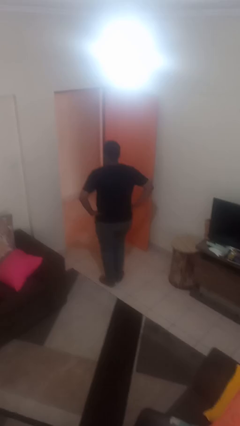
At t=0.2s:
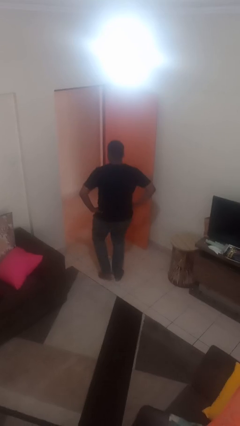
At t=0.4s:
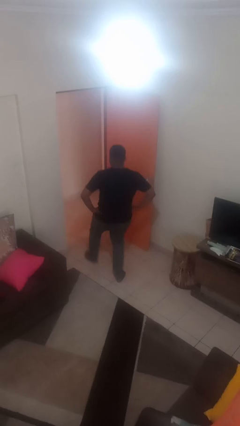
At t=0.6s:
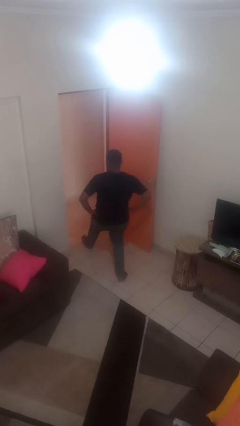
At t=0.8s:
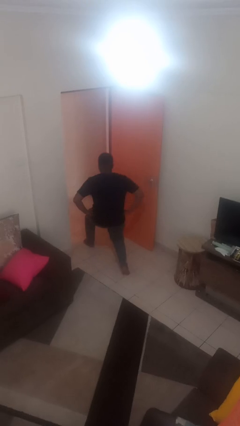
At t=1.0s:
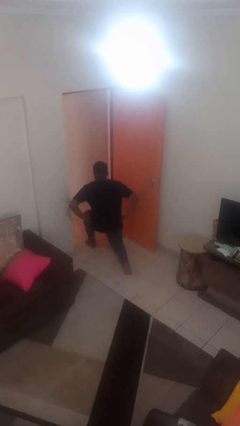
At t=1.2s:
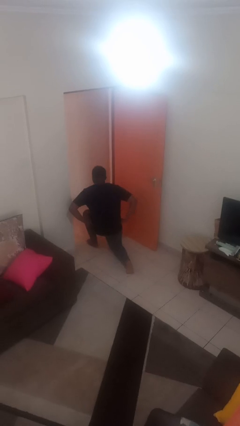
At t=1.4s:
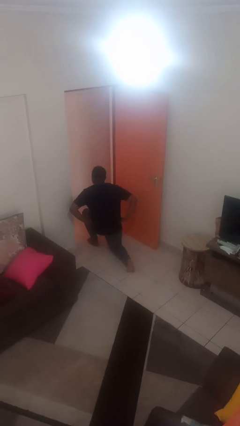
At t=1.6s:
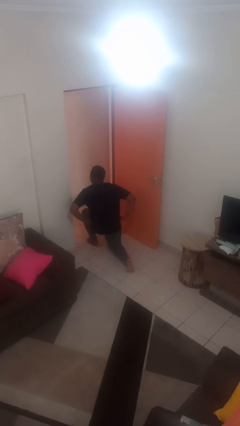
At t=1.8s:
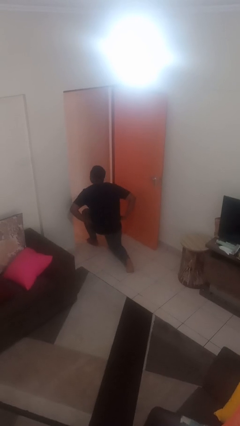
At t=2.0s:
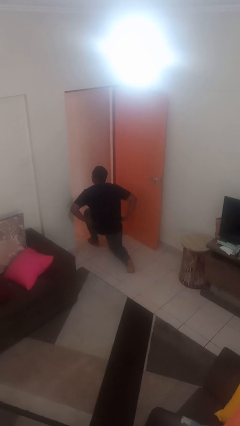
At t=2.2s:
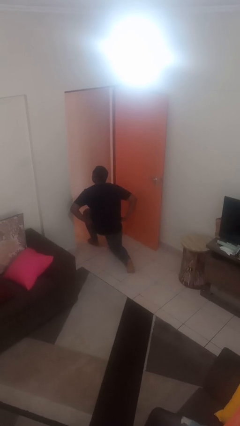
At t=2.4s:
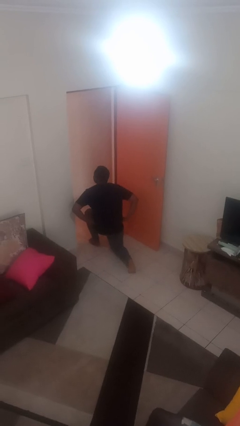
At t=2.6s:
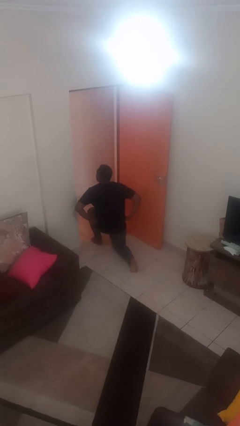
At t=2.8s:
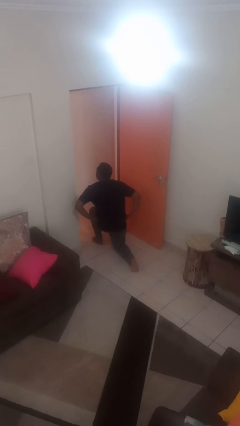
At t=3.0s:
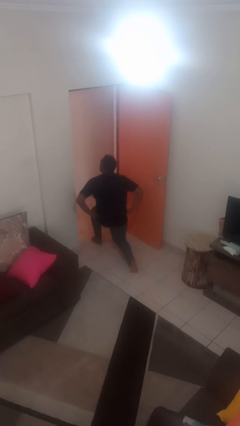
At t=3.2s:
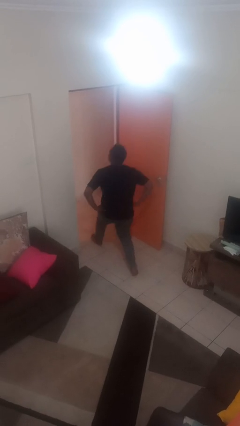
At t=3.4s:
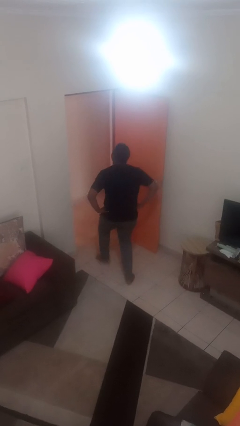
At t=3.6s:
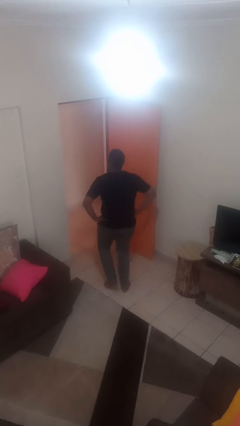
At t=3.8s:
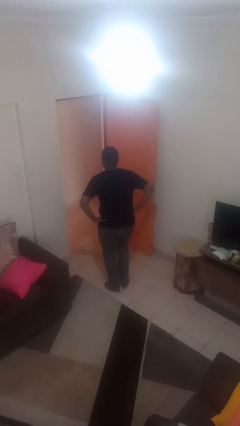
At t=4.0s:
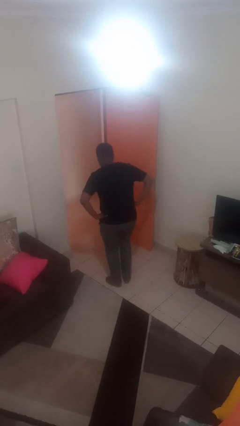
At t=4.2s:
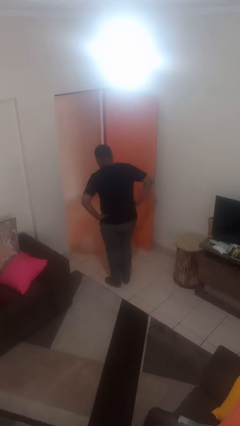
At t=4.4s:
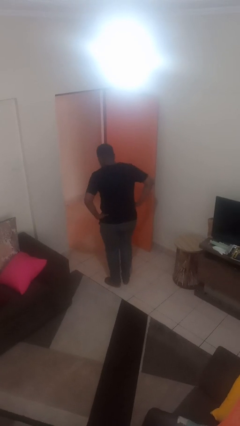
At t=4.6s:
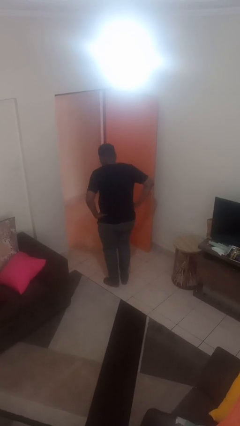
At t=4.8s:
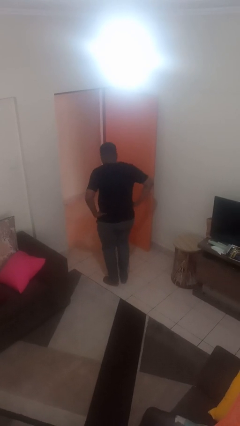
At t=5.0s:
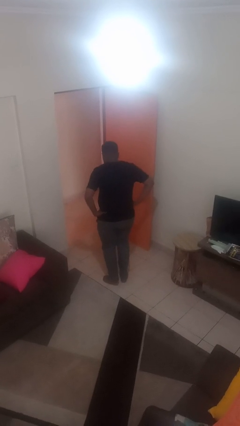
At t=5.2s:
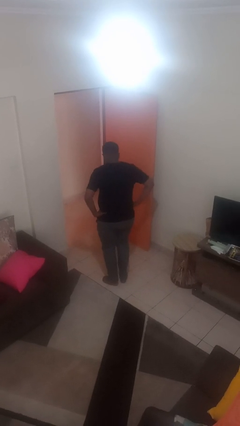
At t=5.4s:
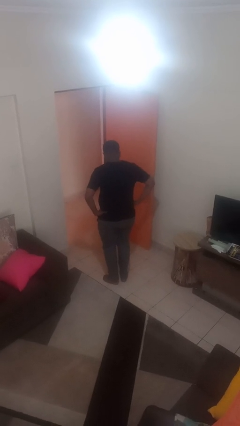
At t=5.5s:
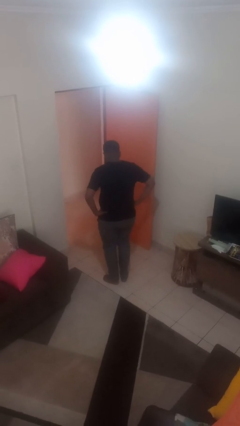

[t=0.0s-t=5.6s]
person exercises with lunges

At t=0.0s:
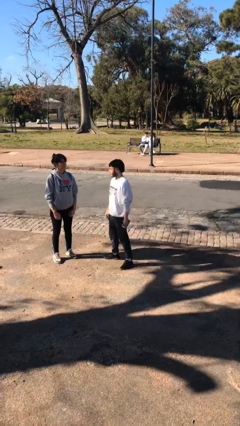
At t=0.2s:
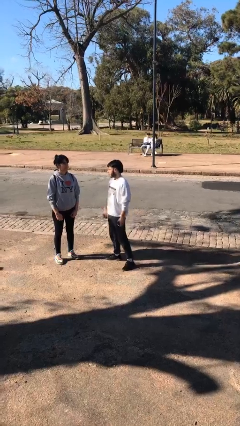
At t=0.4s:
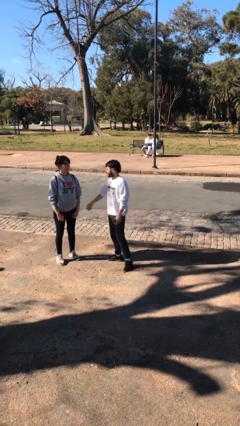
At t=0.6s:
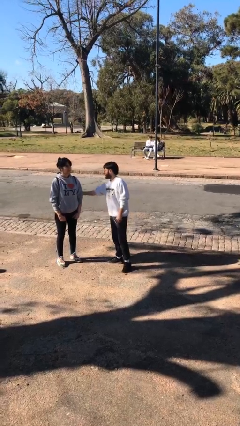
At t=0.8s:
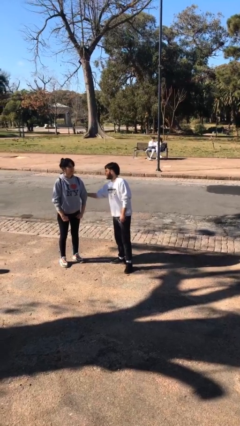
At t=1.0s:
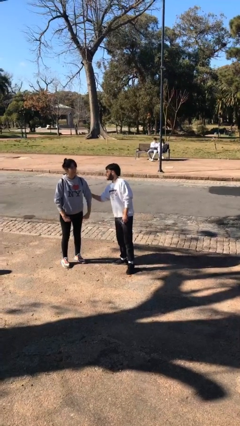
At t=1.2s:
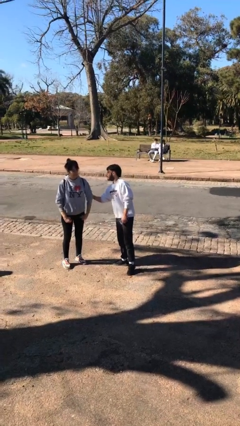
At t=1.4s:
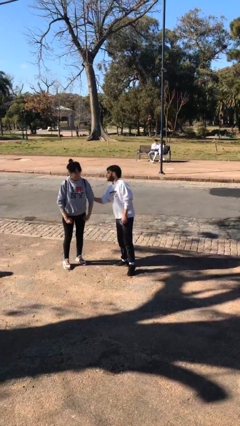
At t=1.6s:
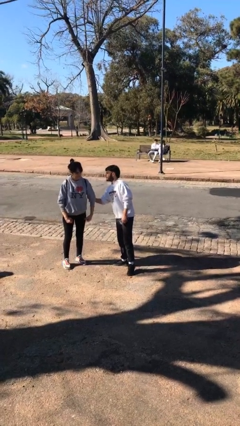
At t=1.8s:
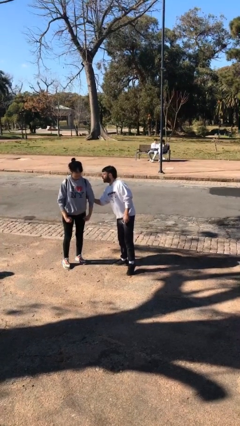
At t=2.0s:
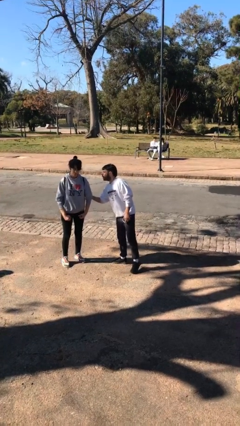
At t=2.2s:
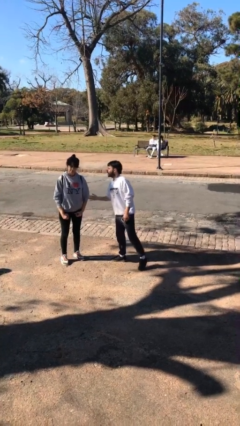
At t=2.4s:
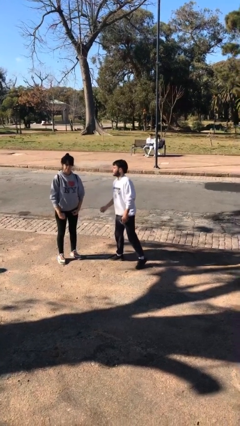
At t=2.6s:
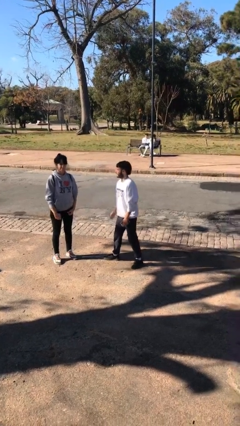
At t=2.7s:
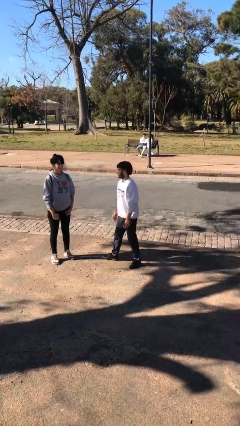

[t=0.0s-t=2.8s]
person grabs person by bicep

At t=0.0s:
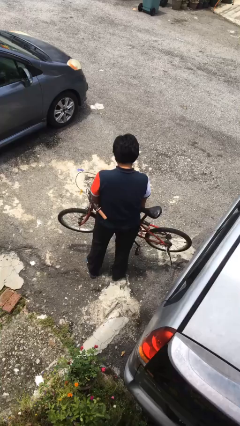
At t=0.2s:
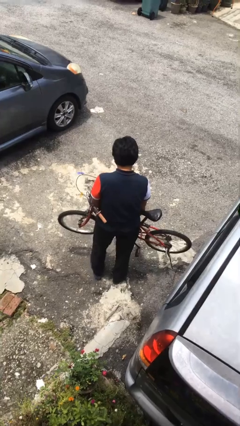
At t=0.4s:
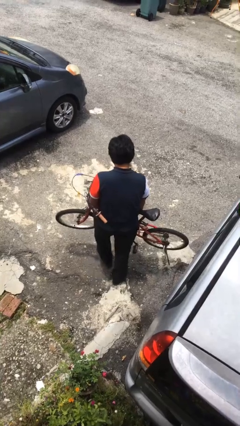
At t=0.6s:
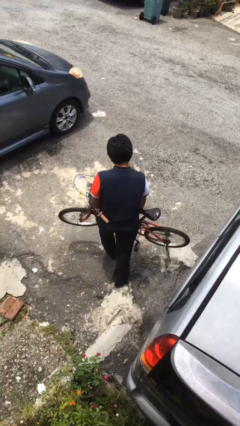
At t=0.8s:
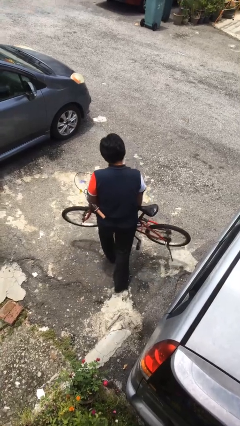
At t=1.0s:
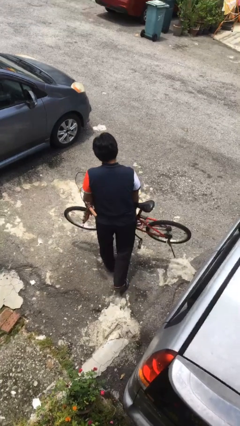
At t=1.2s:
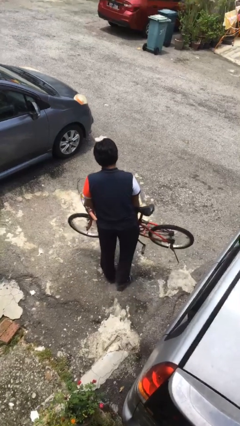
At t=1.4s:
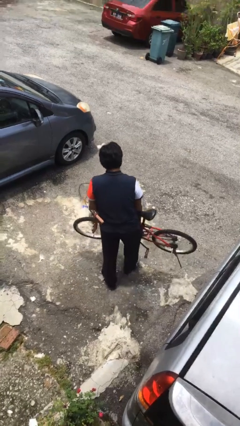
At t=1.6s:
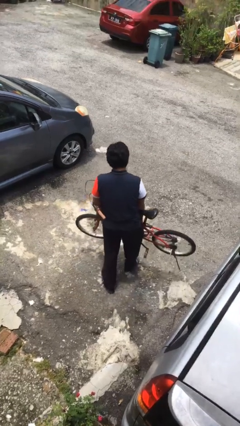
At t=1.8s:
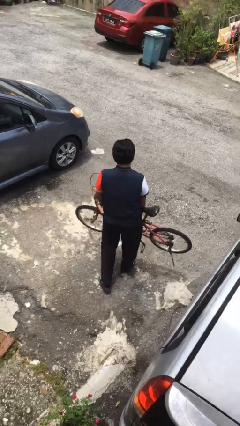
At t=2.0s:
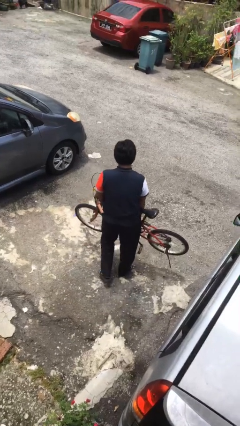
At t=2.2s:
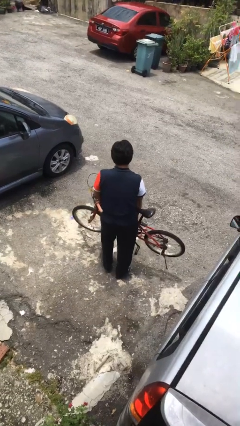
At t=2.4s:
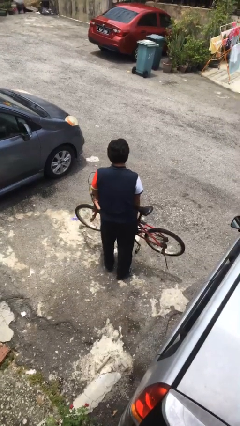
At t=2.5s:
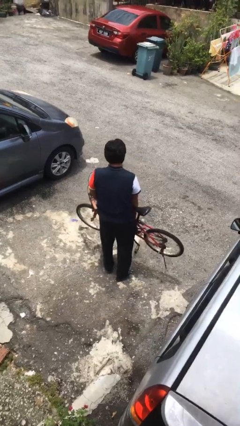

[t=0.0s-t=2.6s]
person carries bicycle

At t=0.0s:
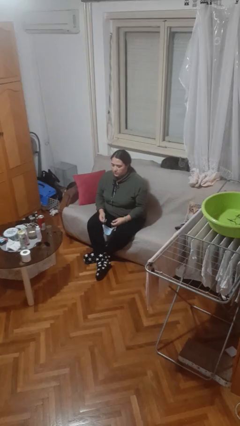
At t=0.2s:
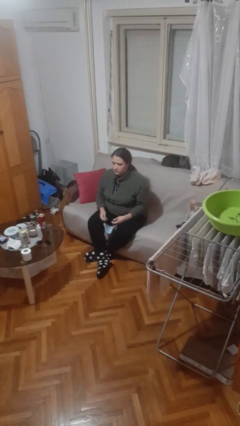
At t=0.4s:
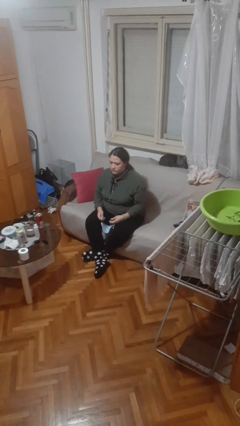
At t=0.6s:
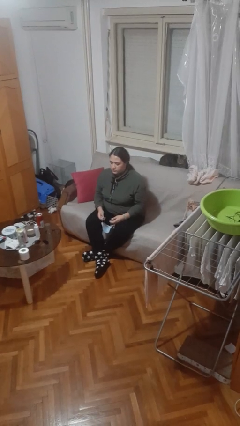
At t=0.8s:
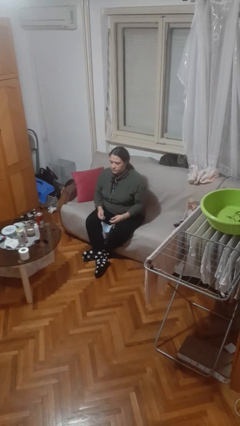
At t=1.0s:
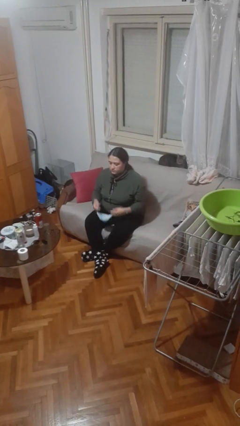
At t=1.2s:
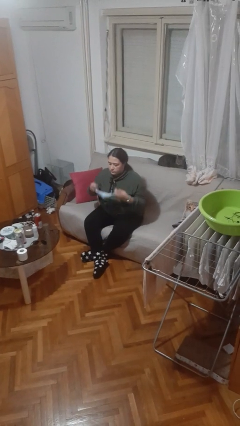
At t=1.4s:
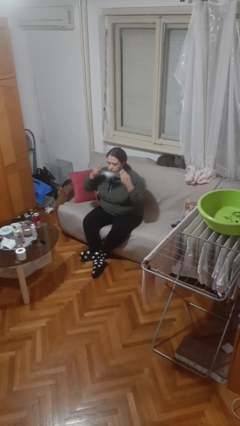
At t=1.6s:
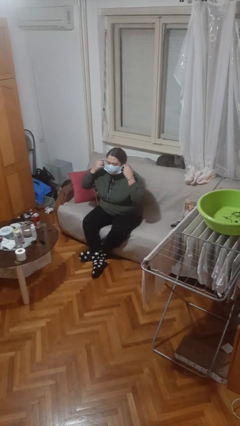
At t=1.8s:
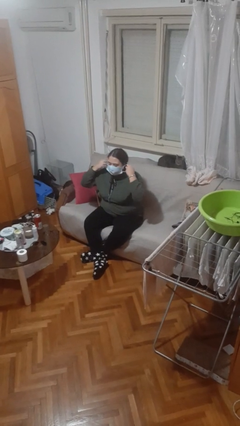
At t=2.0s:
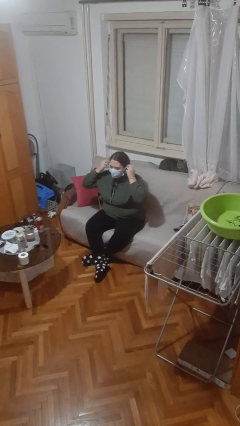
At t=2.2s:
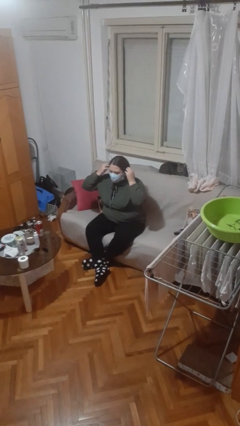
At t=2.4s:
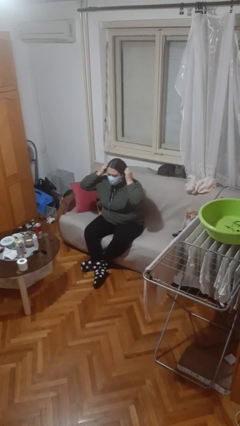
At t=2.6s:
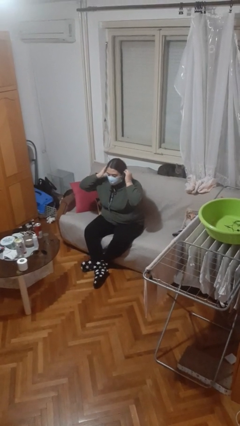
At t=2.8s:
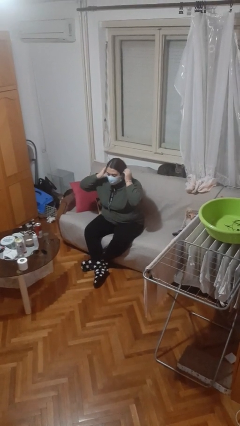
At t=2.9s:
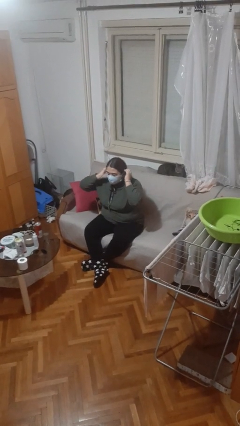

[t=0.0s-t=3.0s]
person puts on facemask

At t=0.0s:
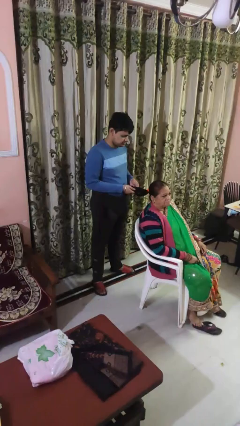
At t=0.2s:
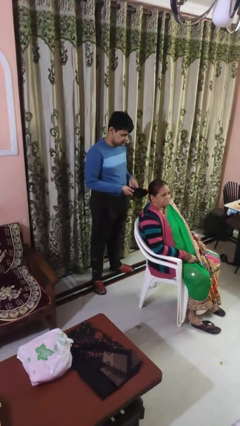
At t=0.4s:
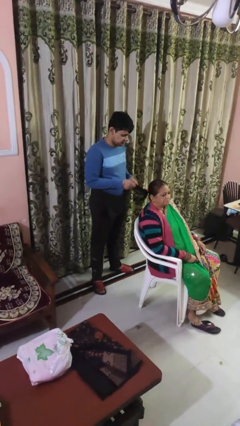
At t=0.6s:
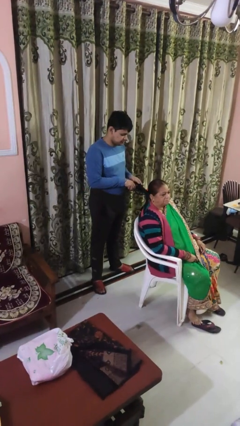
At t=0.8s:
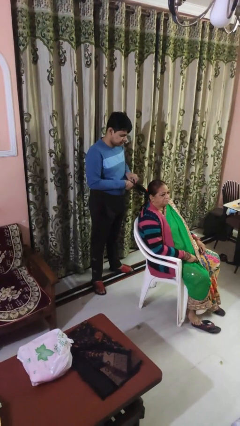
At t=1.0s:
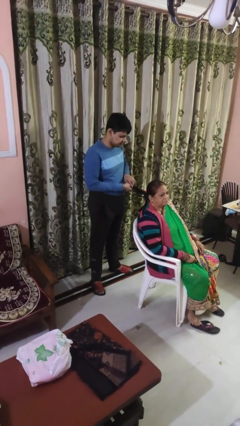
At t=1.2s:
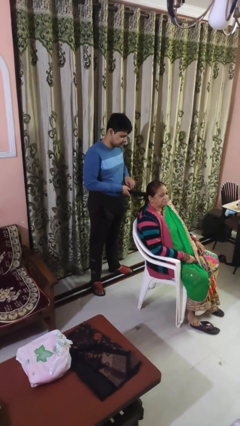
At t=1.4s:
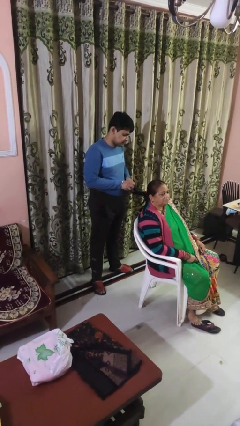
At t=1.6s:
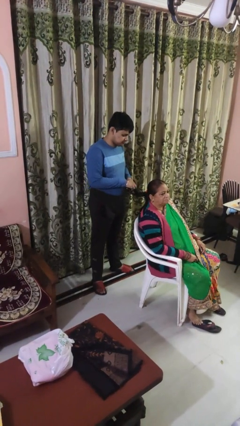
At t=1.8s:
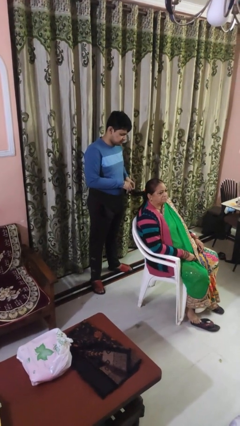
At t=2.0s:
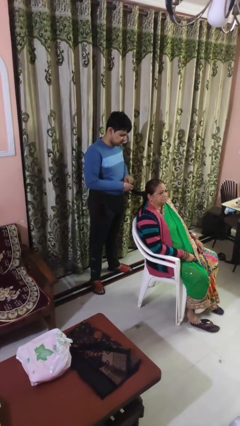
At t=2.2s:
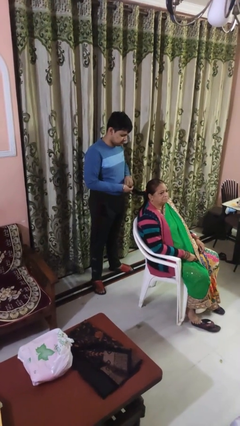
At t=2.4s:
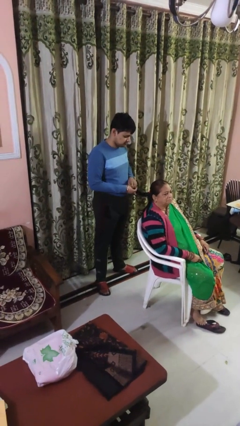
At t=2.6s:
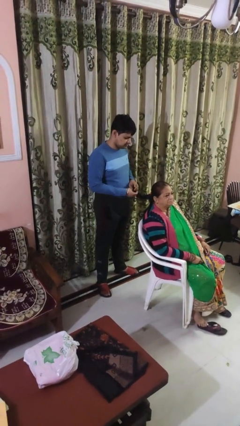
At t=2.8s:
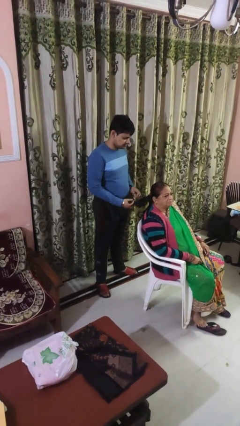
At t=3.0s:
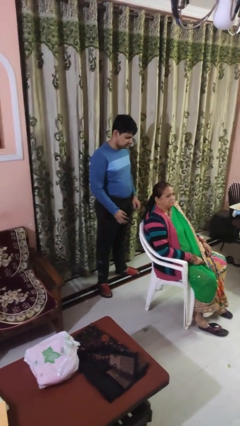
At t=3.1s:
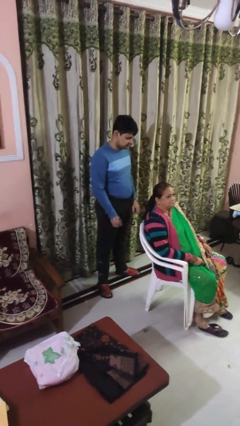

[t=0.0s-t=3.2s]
person braids hair of person

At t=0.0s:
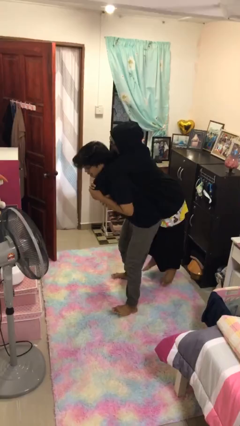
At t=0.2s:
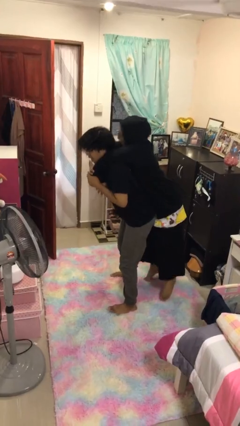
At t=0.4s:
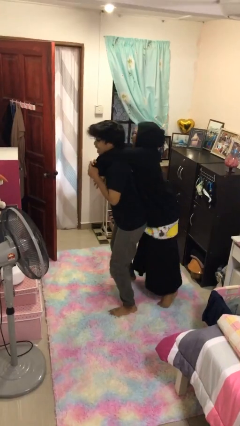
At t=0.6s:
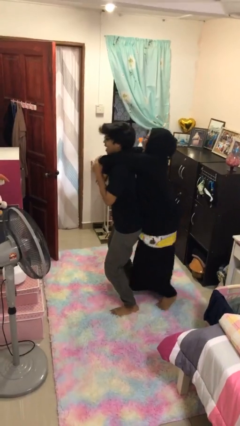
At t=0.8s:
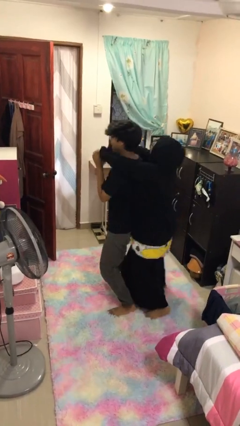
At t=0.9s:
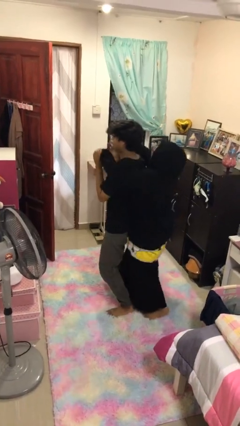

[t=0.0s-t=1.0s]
person puts down person
